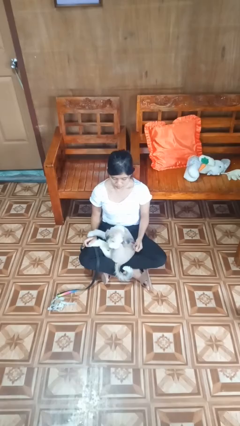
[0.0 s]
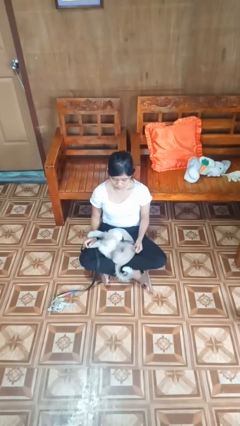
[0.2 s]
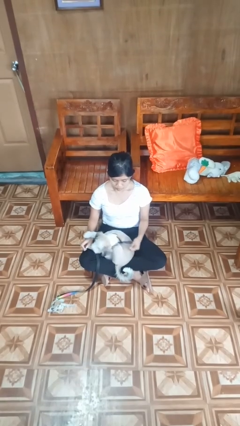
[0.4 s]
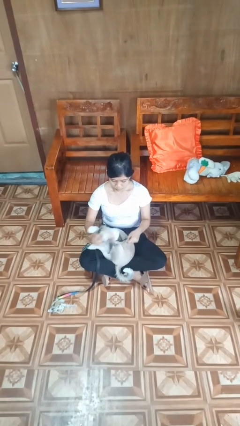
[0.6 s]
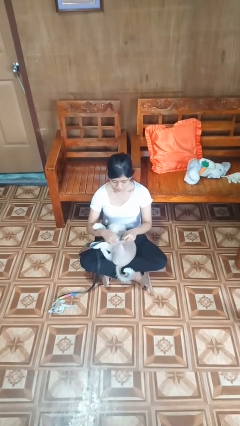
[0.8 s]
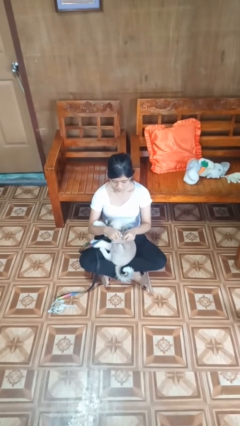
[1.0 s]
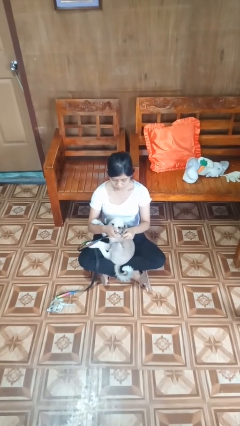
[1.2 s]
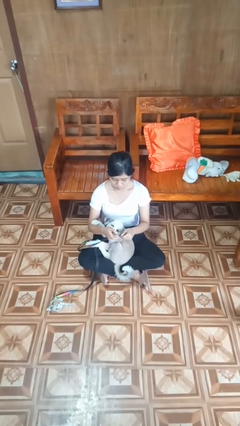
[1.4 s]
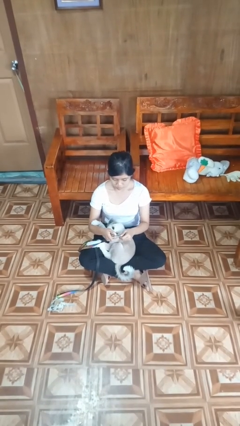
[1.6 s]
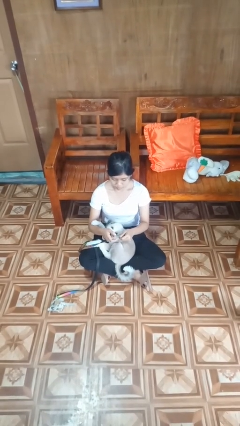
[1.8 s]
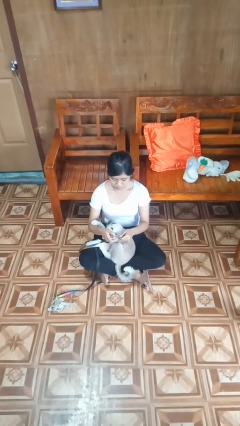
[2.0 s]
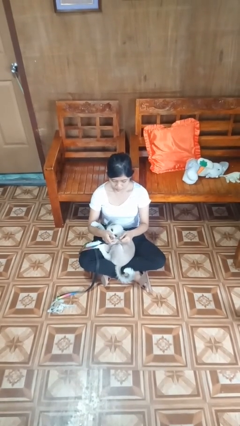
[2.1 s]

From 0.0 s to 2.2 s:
person attaches leash to dog

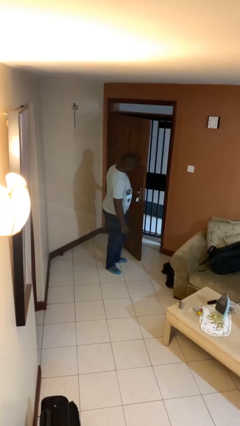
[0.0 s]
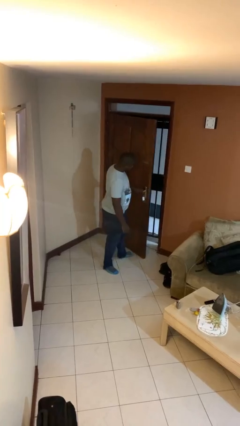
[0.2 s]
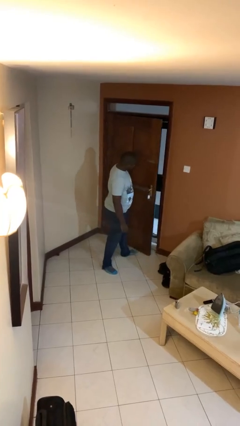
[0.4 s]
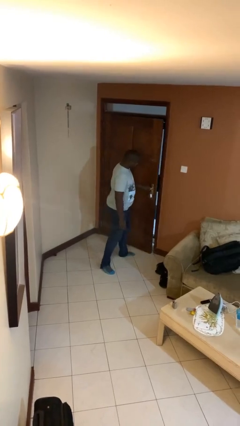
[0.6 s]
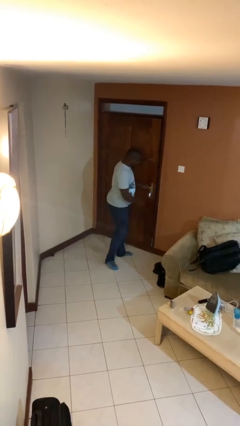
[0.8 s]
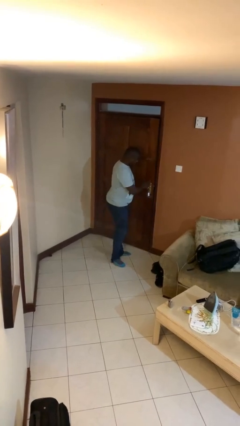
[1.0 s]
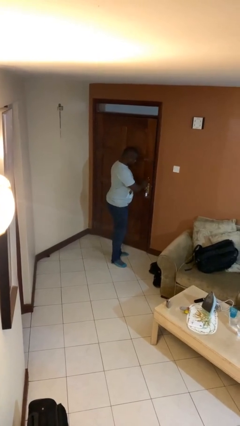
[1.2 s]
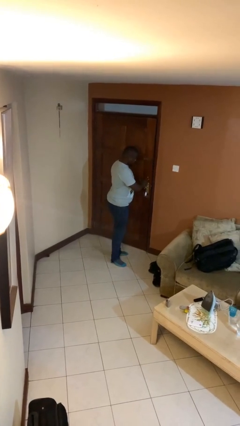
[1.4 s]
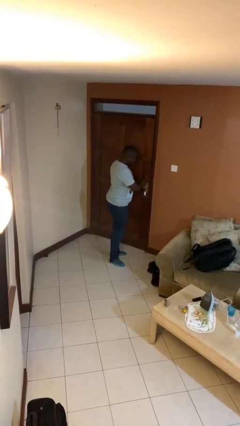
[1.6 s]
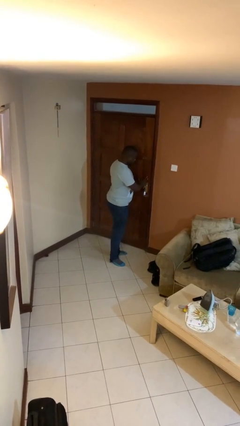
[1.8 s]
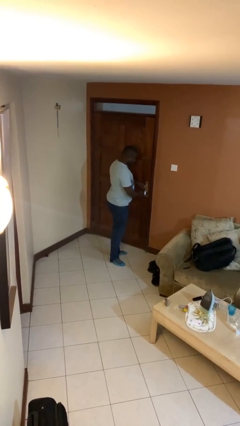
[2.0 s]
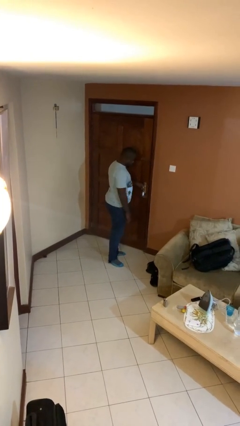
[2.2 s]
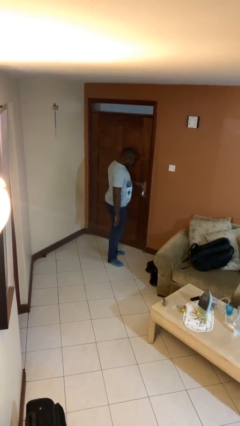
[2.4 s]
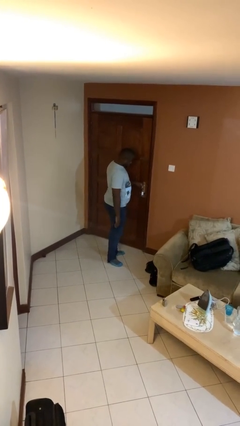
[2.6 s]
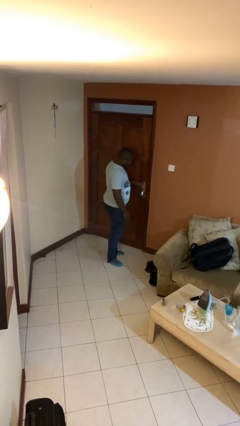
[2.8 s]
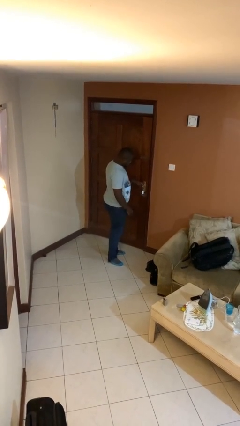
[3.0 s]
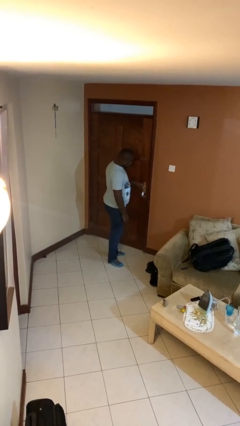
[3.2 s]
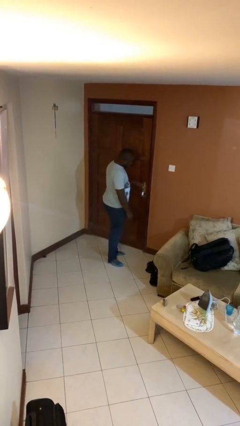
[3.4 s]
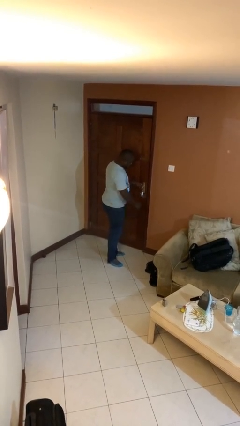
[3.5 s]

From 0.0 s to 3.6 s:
person closes facility door

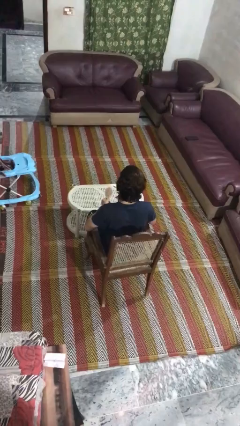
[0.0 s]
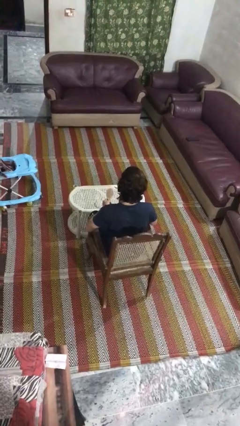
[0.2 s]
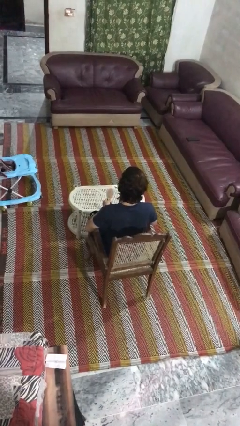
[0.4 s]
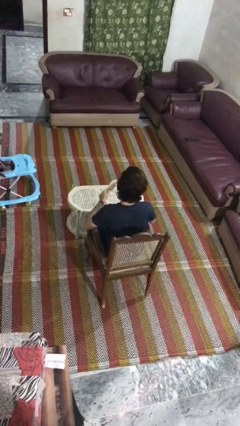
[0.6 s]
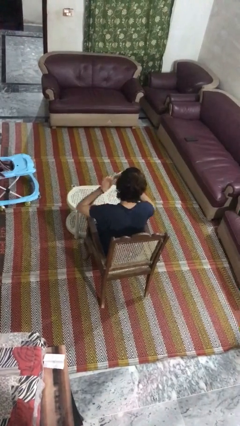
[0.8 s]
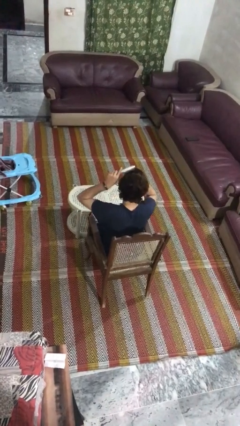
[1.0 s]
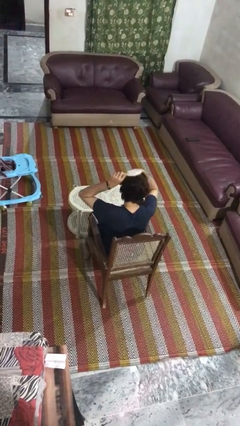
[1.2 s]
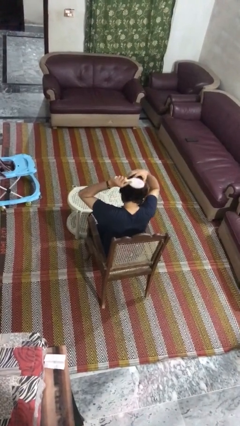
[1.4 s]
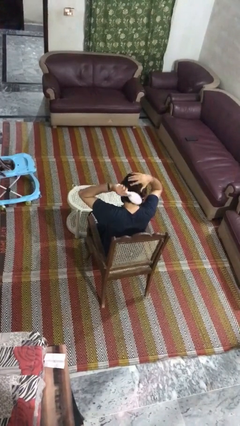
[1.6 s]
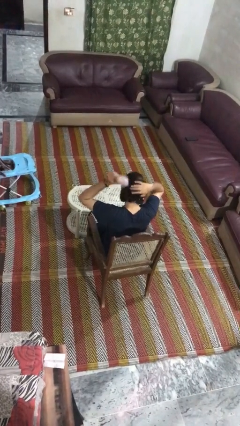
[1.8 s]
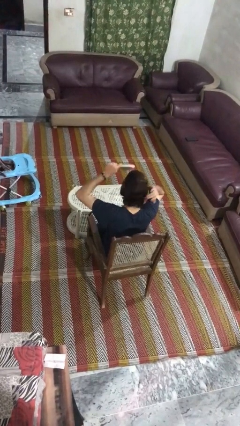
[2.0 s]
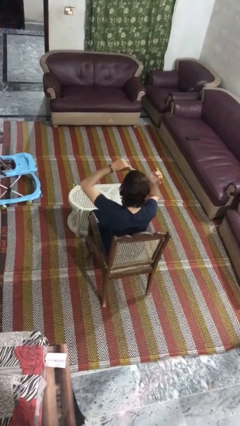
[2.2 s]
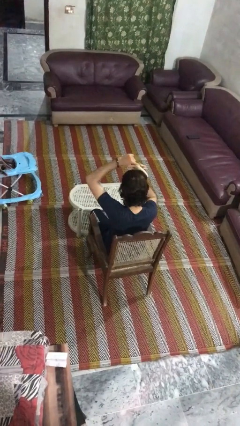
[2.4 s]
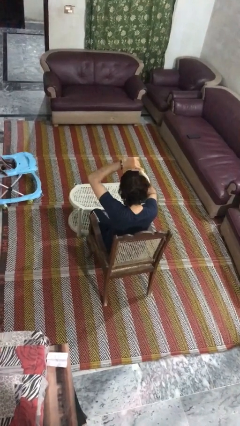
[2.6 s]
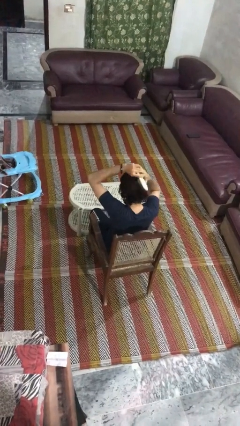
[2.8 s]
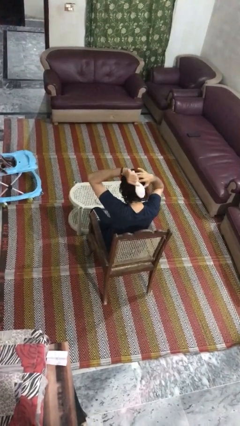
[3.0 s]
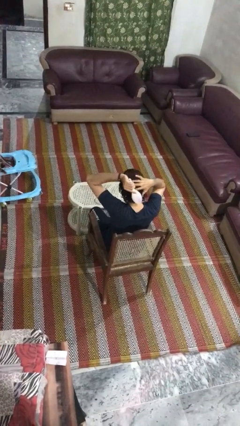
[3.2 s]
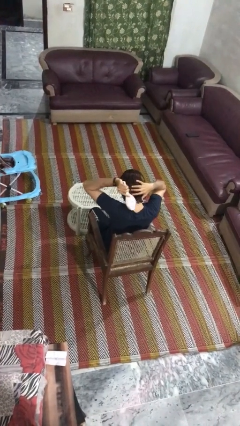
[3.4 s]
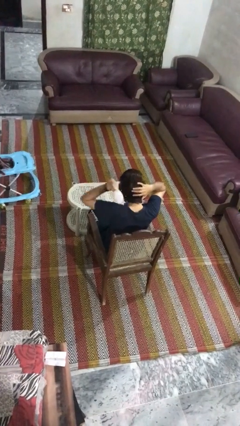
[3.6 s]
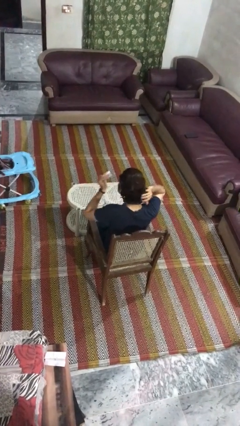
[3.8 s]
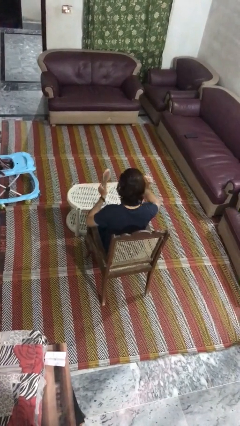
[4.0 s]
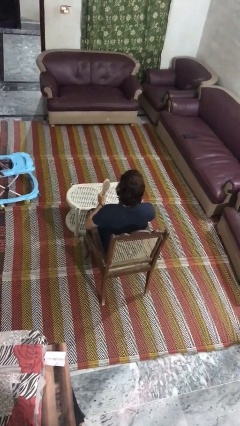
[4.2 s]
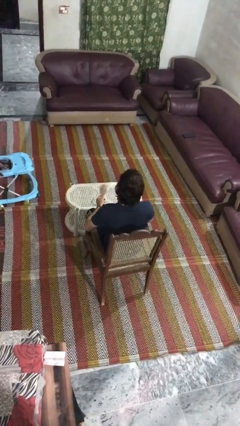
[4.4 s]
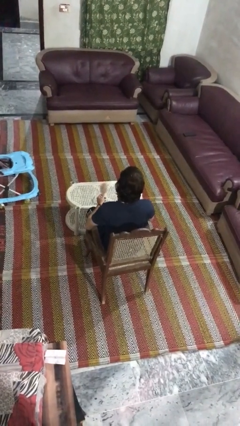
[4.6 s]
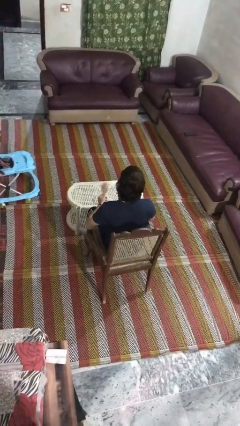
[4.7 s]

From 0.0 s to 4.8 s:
person brushes hair

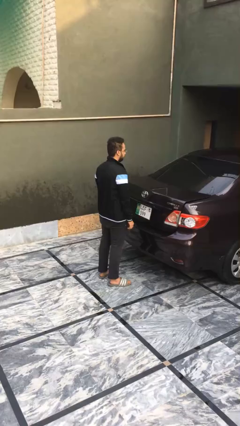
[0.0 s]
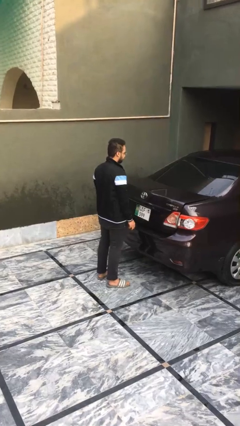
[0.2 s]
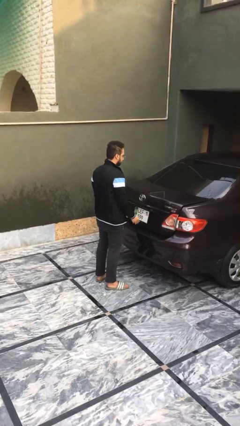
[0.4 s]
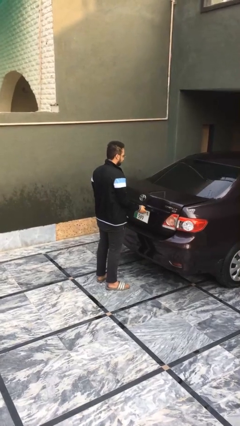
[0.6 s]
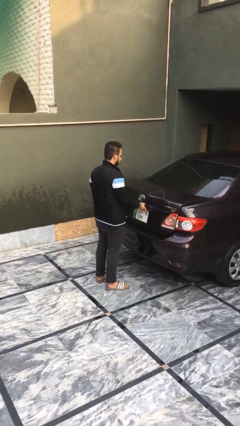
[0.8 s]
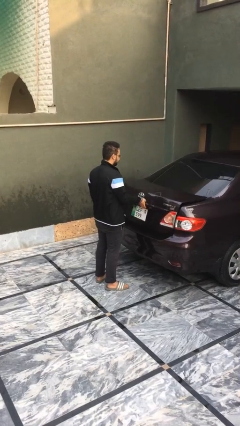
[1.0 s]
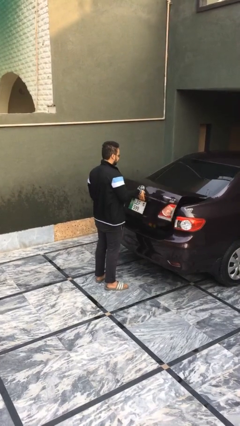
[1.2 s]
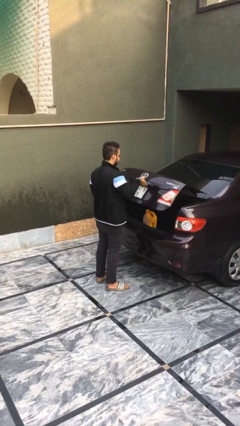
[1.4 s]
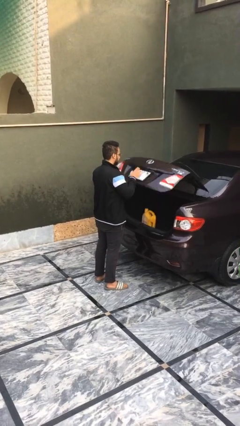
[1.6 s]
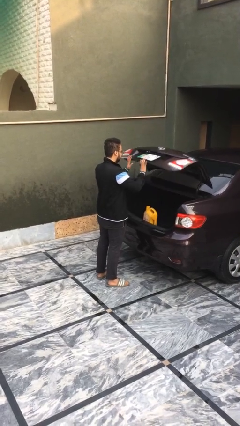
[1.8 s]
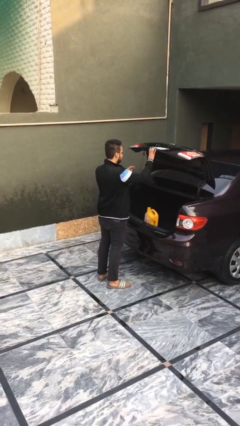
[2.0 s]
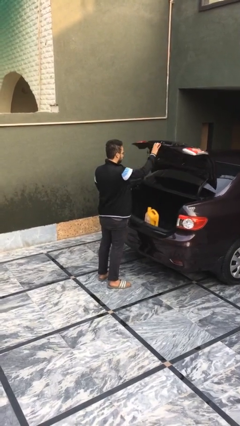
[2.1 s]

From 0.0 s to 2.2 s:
person opens car trunk

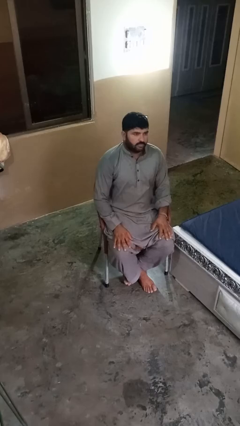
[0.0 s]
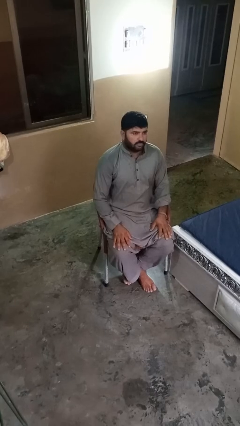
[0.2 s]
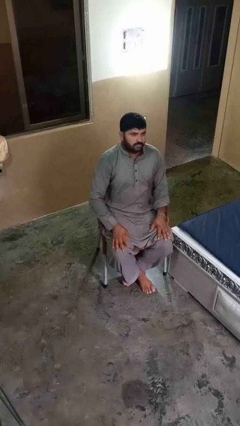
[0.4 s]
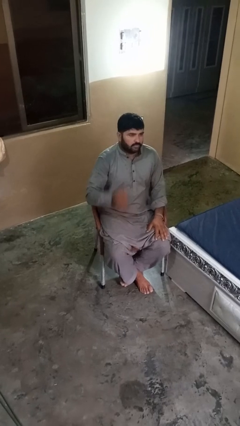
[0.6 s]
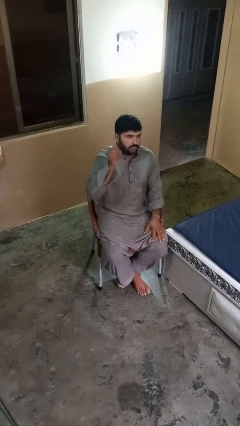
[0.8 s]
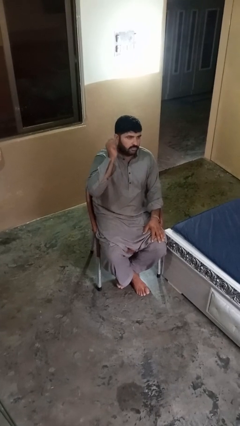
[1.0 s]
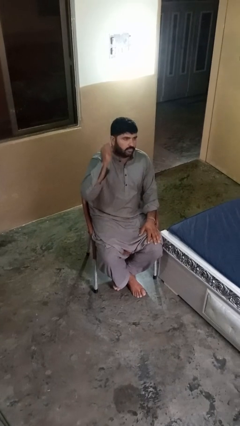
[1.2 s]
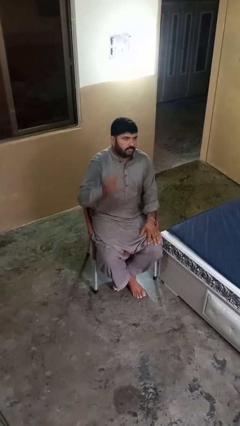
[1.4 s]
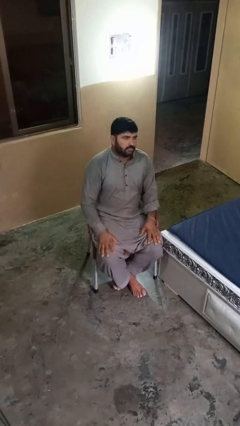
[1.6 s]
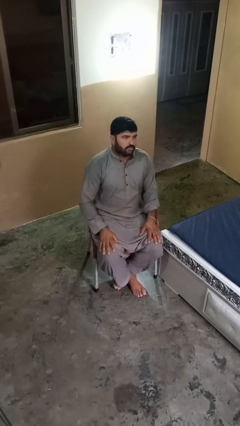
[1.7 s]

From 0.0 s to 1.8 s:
person gestures behind me

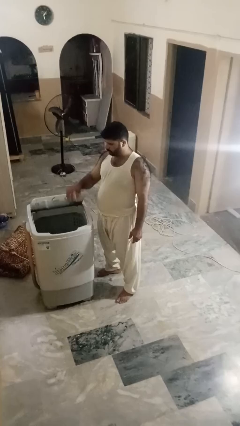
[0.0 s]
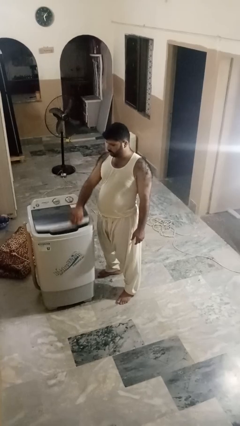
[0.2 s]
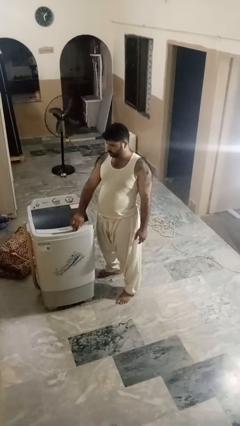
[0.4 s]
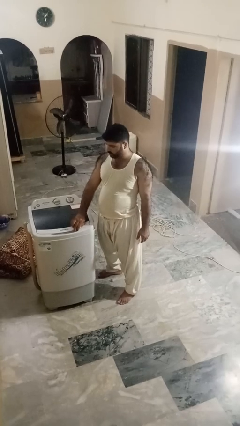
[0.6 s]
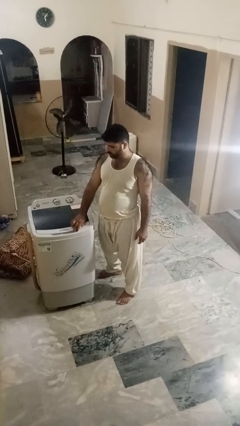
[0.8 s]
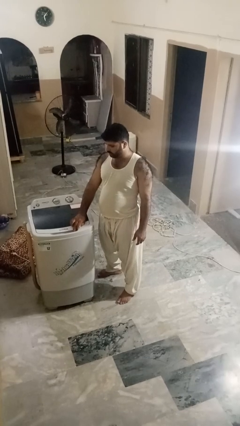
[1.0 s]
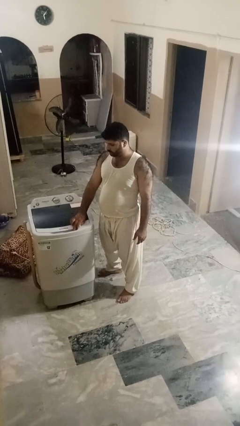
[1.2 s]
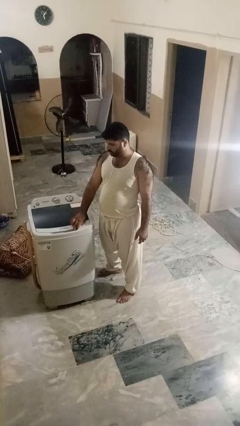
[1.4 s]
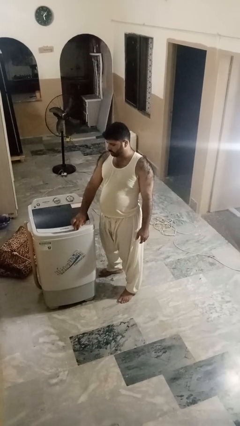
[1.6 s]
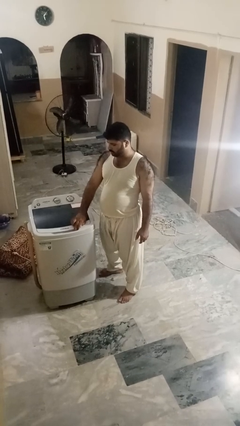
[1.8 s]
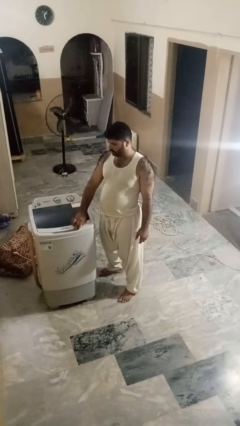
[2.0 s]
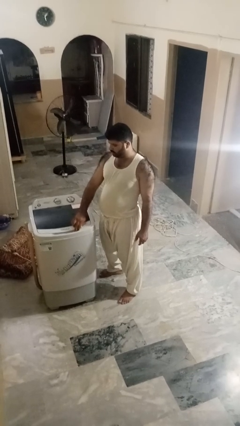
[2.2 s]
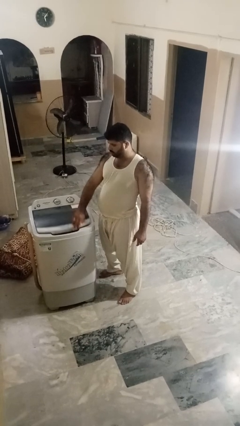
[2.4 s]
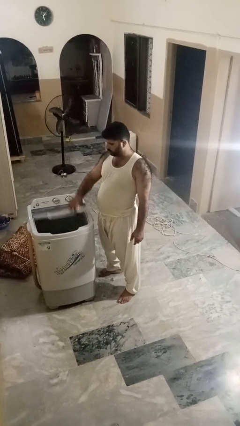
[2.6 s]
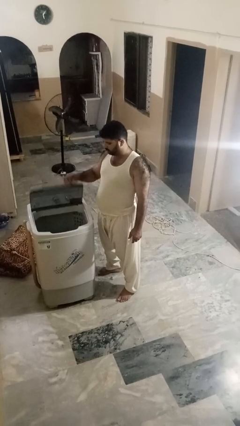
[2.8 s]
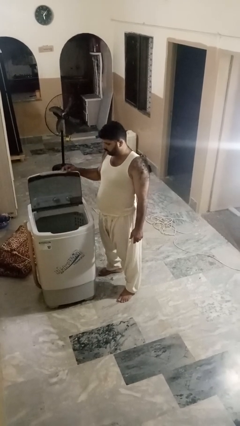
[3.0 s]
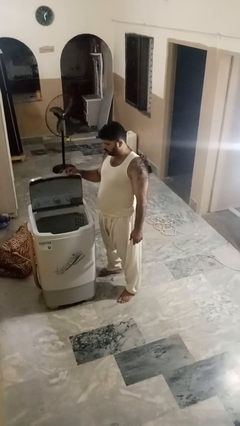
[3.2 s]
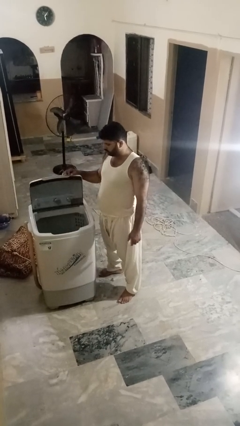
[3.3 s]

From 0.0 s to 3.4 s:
person closes clothes washer
